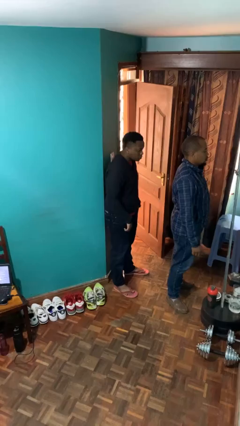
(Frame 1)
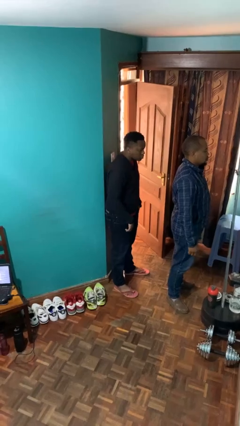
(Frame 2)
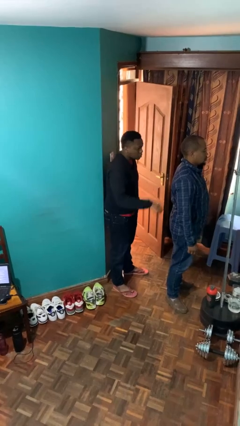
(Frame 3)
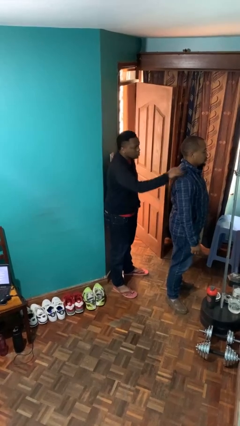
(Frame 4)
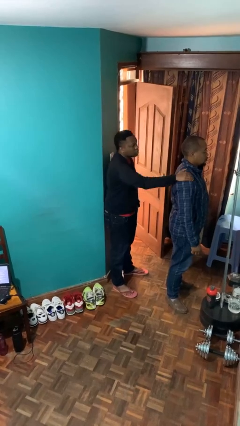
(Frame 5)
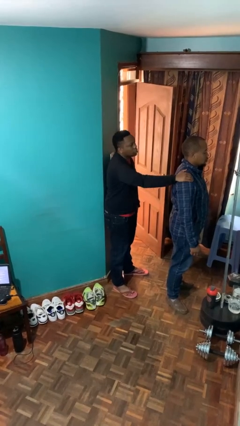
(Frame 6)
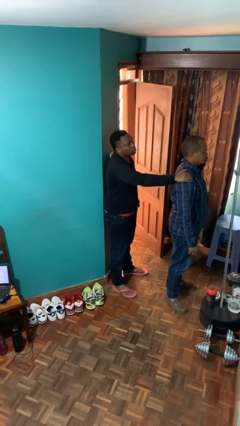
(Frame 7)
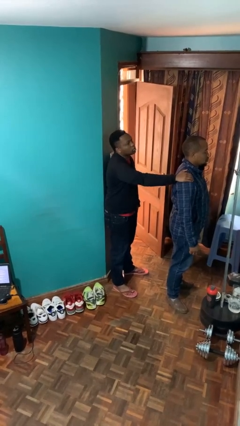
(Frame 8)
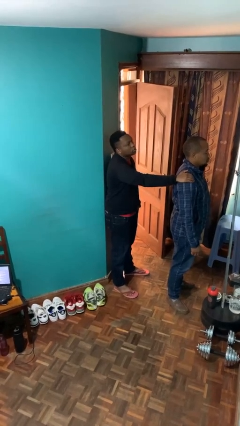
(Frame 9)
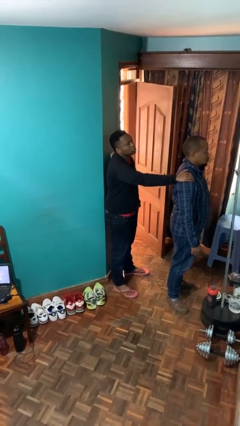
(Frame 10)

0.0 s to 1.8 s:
person grabs person by shoulder

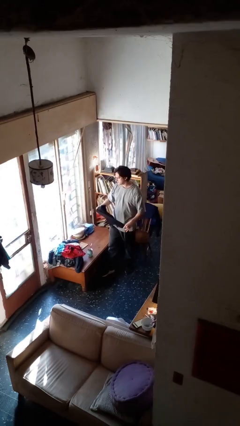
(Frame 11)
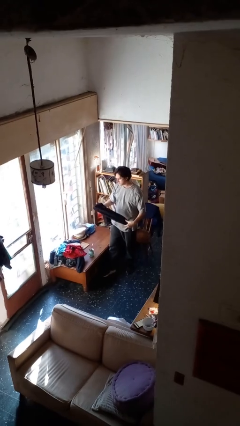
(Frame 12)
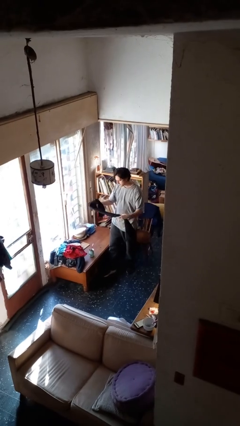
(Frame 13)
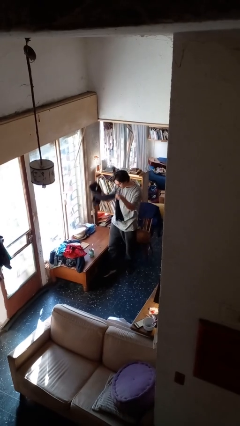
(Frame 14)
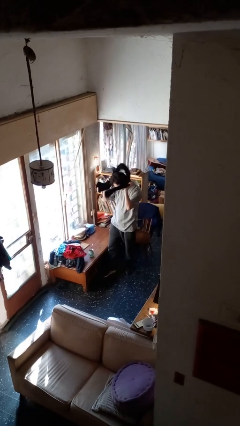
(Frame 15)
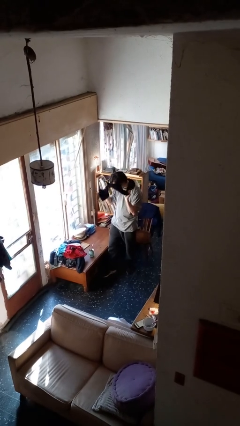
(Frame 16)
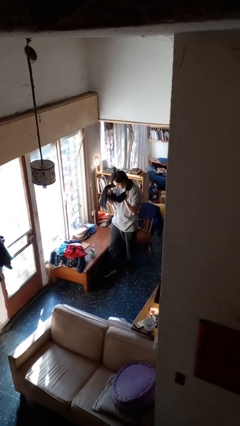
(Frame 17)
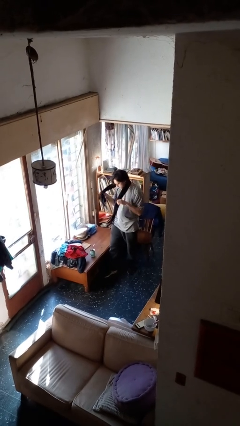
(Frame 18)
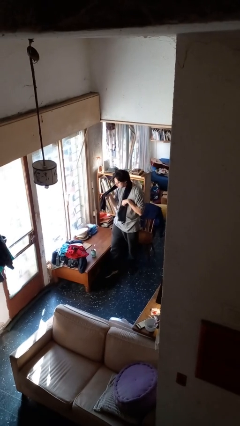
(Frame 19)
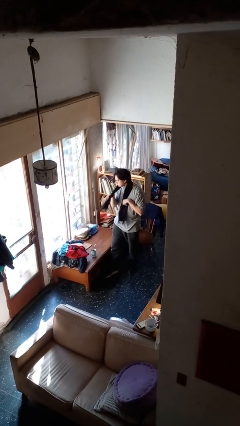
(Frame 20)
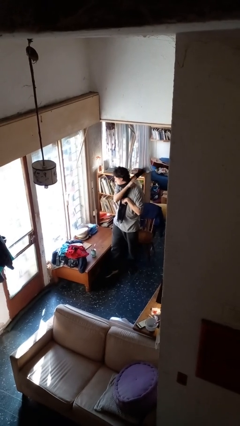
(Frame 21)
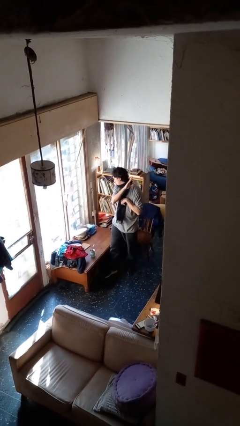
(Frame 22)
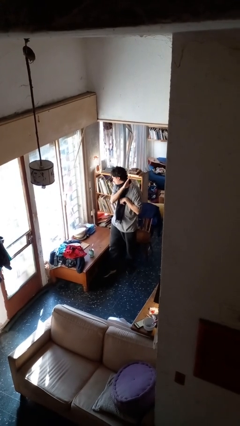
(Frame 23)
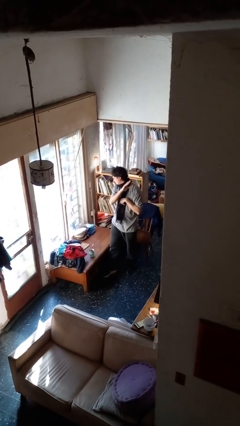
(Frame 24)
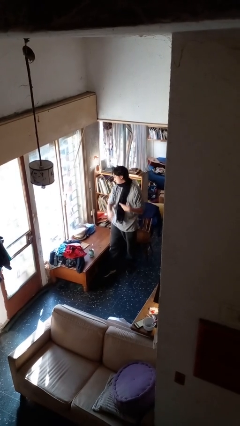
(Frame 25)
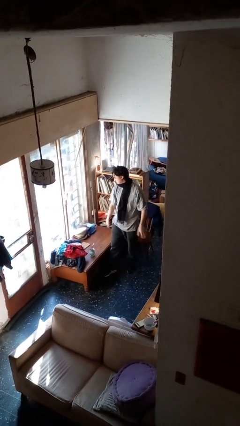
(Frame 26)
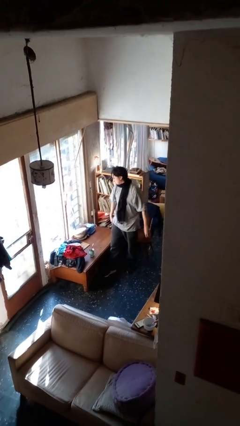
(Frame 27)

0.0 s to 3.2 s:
person puts on scarf

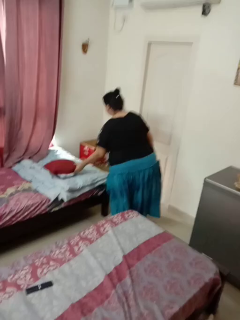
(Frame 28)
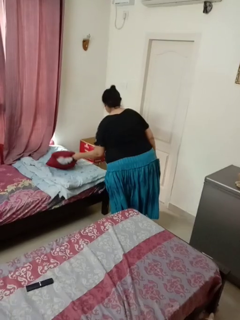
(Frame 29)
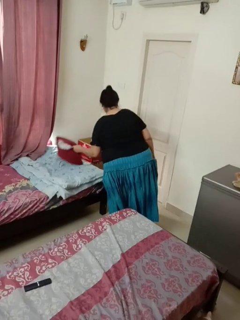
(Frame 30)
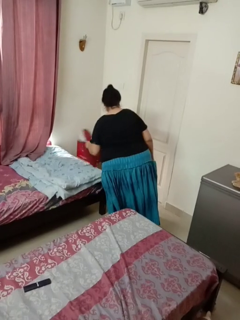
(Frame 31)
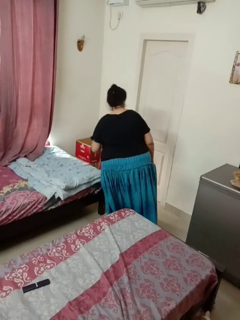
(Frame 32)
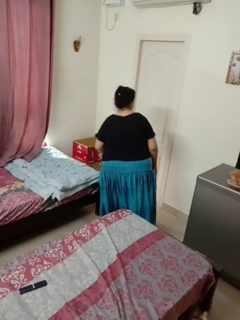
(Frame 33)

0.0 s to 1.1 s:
person picks up object from bed

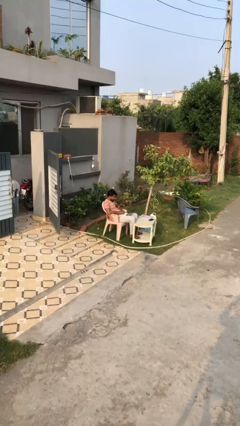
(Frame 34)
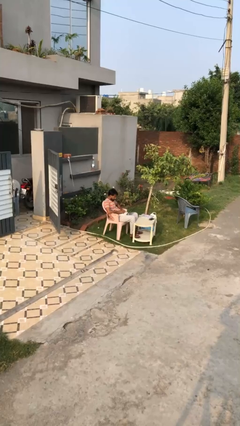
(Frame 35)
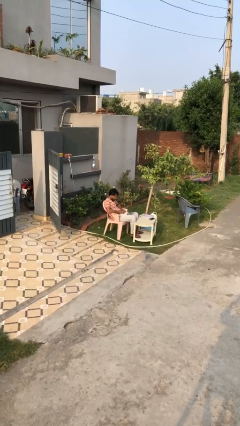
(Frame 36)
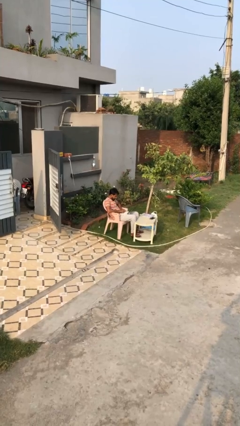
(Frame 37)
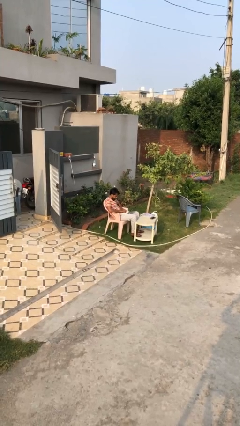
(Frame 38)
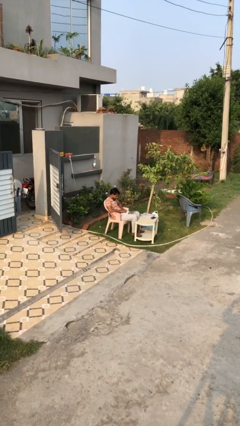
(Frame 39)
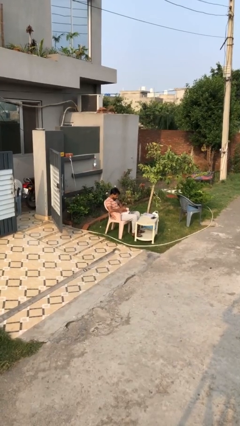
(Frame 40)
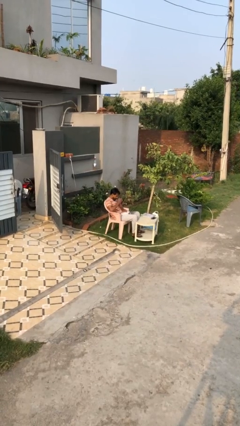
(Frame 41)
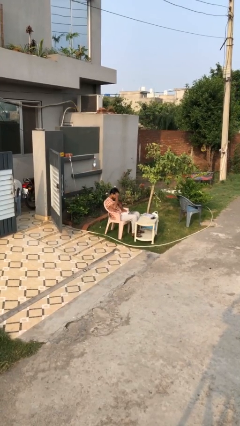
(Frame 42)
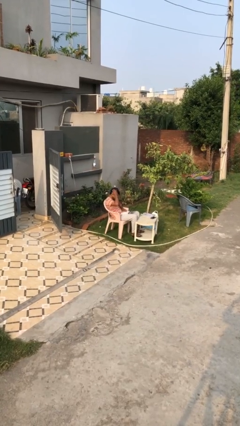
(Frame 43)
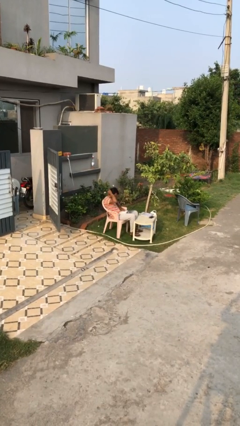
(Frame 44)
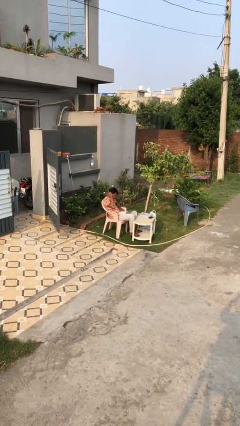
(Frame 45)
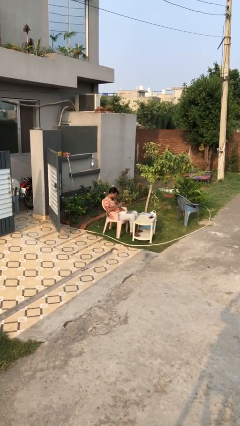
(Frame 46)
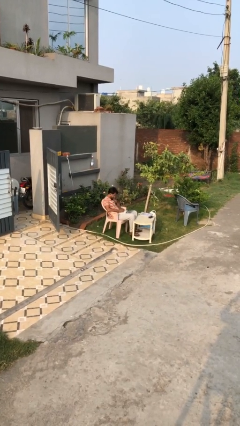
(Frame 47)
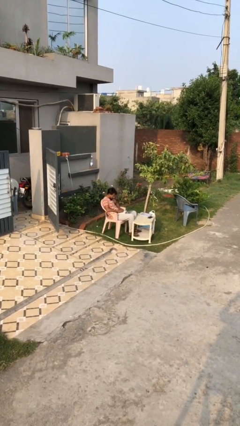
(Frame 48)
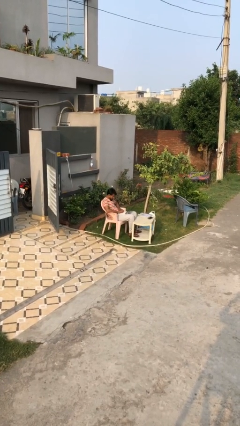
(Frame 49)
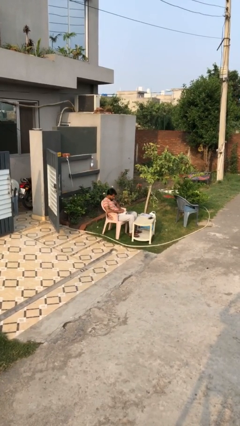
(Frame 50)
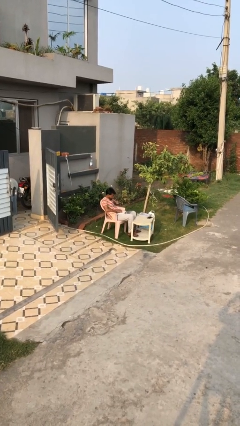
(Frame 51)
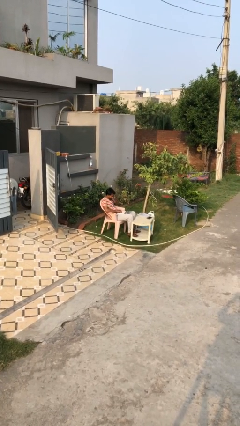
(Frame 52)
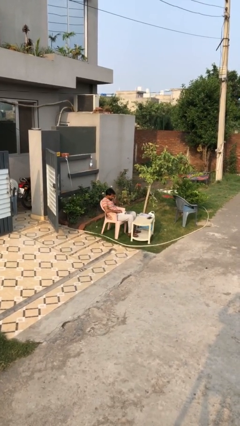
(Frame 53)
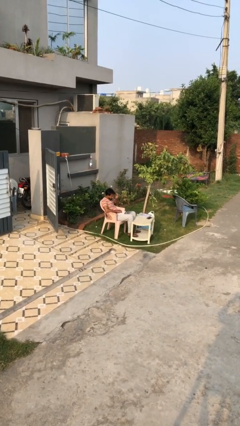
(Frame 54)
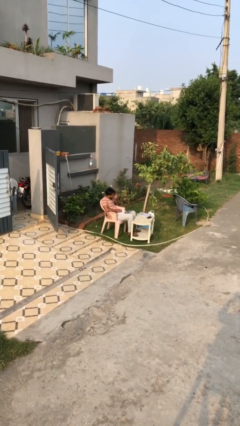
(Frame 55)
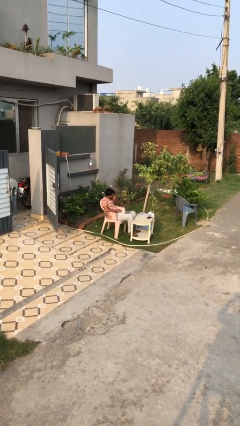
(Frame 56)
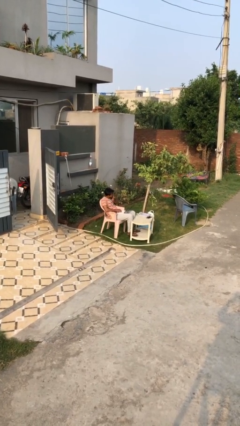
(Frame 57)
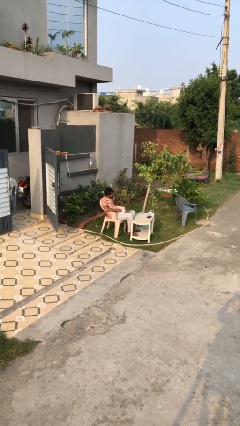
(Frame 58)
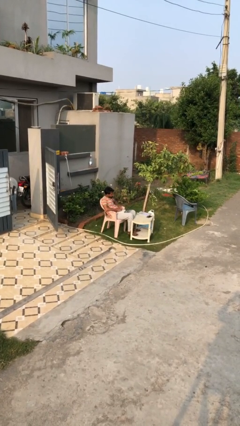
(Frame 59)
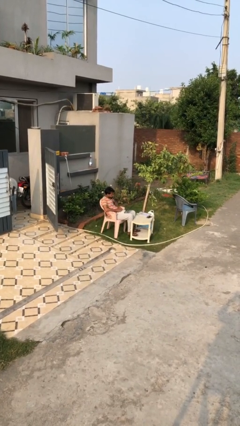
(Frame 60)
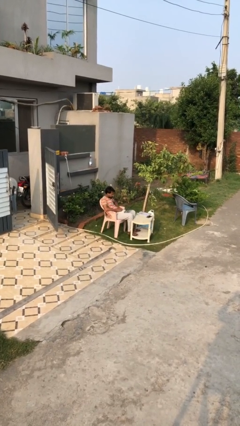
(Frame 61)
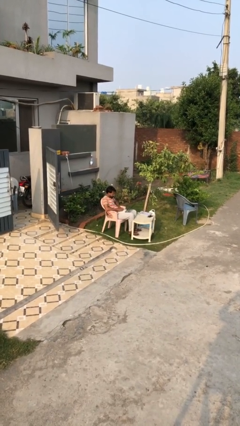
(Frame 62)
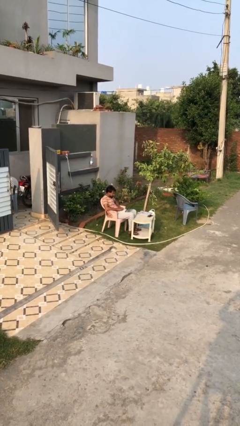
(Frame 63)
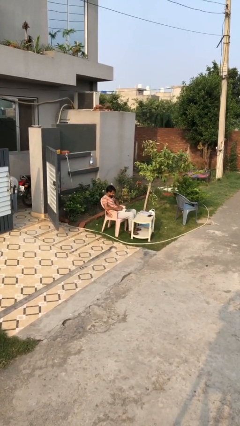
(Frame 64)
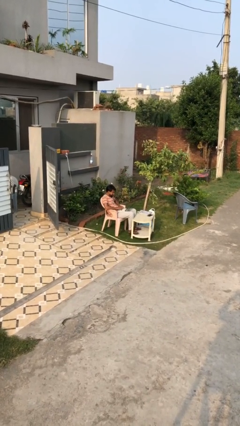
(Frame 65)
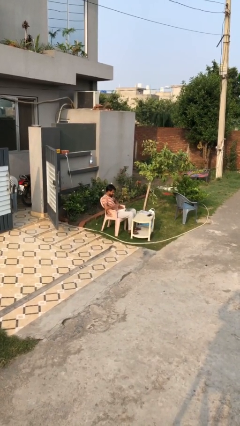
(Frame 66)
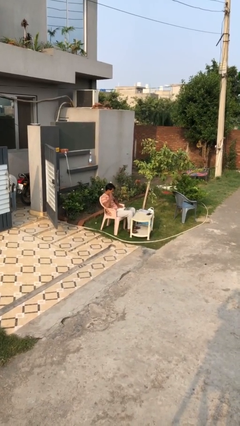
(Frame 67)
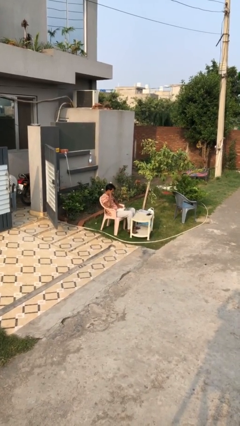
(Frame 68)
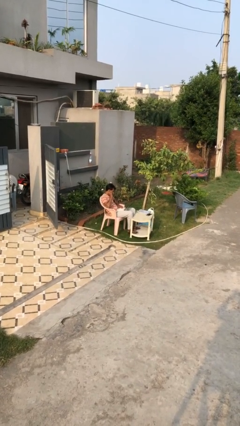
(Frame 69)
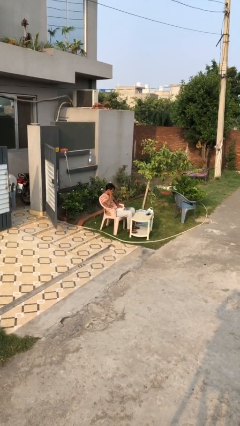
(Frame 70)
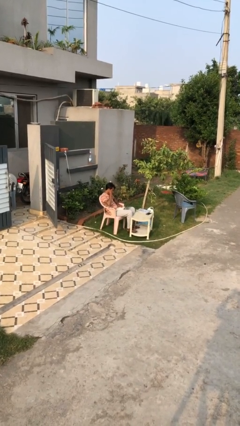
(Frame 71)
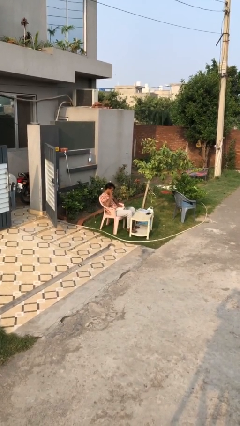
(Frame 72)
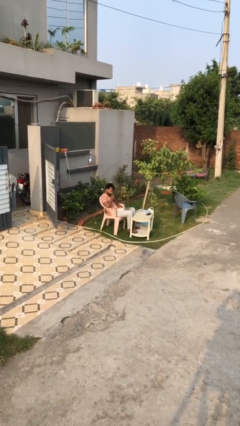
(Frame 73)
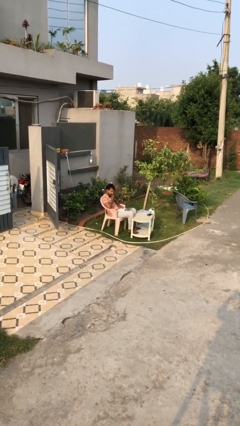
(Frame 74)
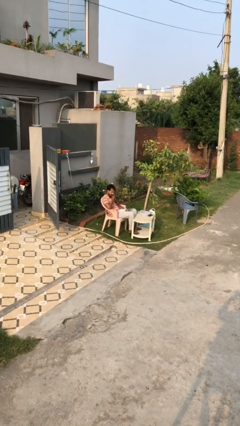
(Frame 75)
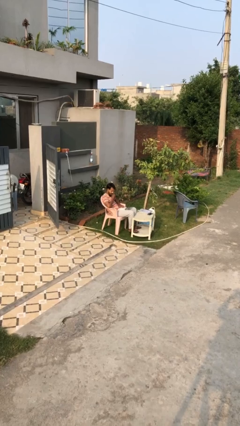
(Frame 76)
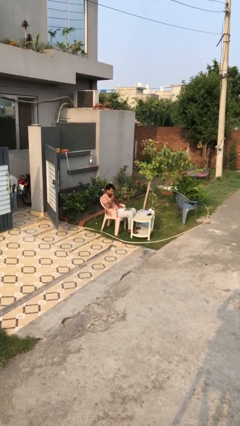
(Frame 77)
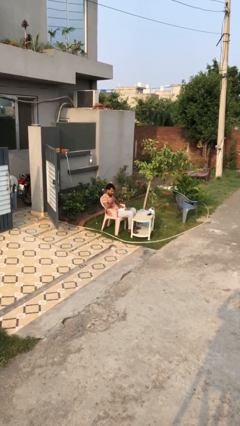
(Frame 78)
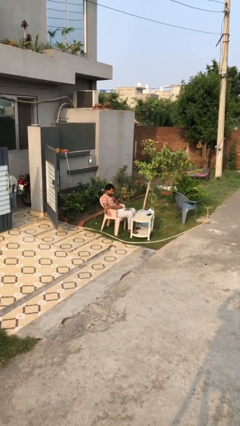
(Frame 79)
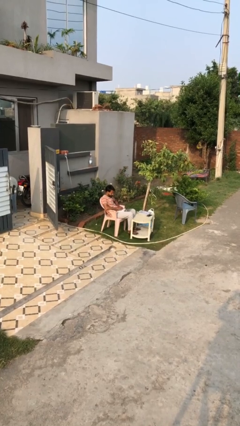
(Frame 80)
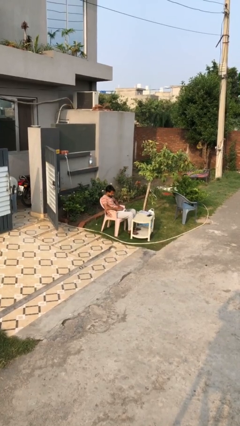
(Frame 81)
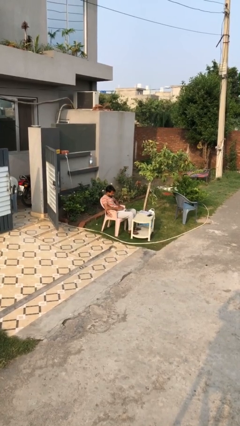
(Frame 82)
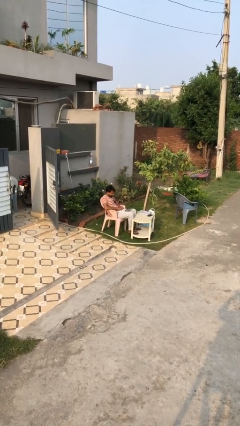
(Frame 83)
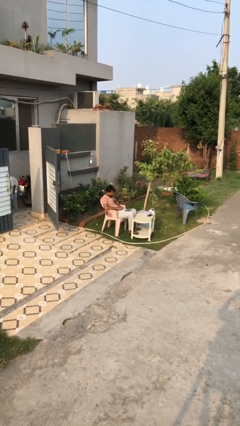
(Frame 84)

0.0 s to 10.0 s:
person interacts with laptop

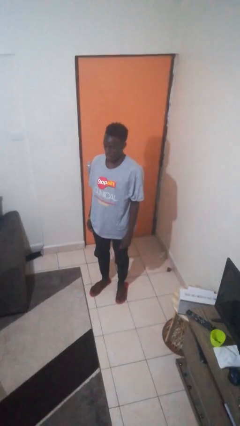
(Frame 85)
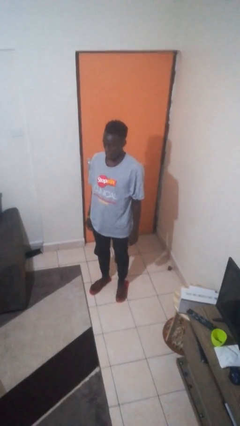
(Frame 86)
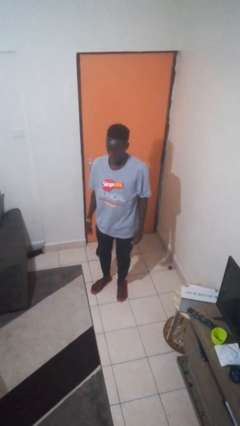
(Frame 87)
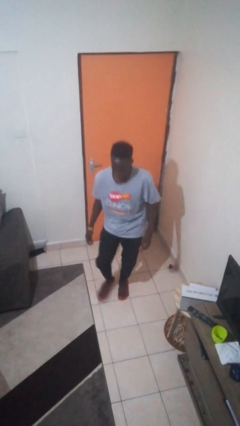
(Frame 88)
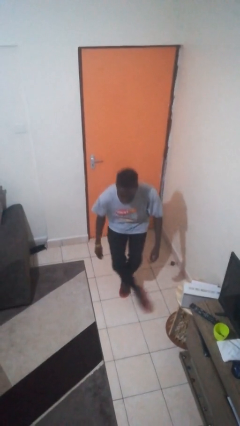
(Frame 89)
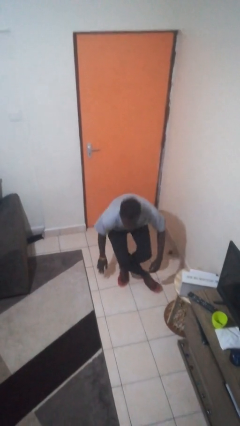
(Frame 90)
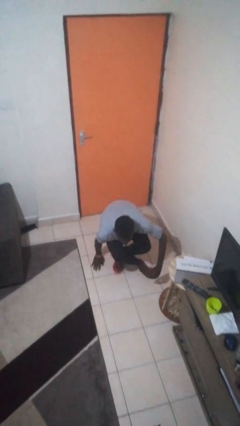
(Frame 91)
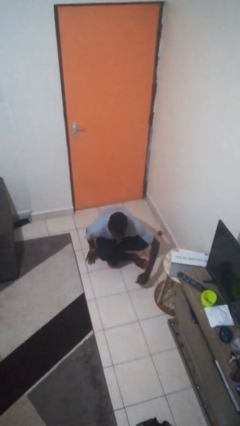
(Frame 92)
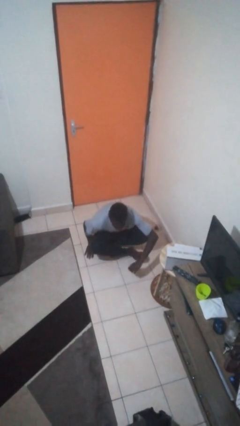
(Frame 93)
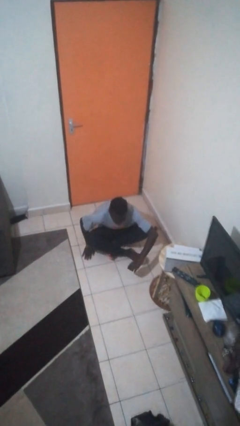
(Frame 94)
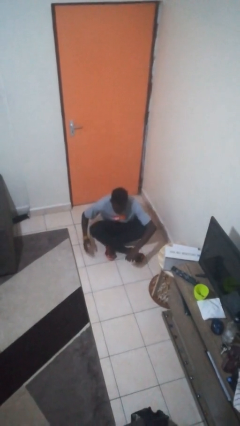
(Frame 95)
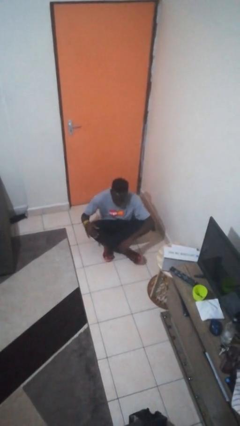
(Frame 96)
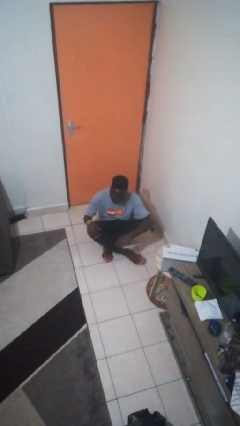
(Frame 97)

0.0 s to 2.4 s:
person sits crisscross
